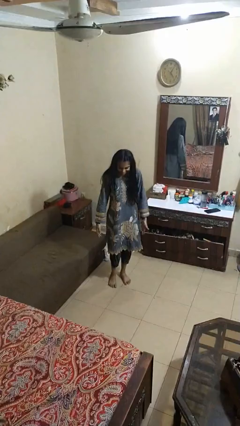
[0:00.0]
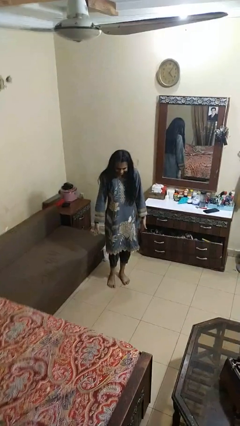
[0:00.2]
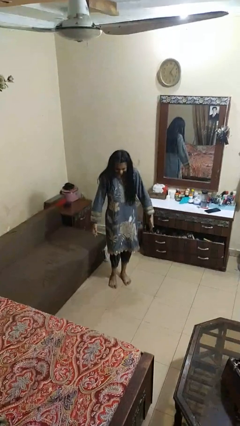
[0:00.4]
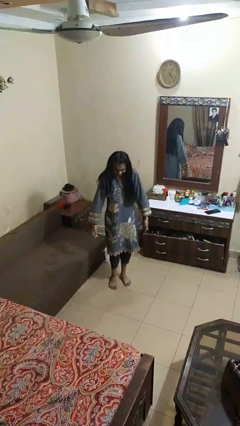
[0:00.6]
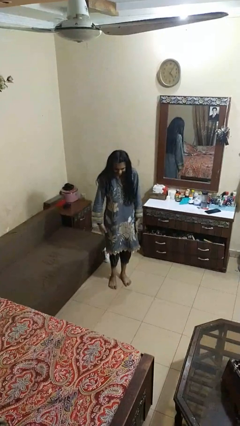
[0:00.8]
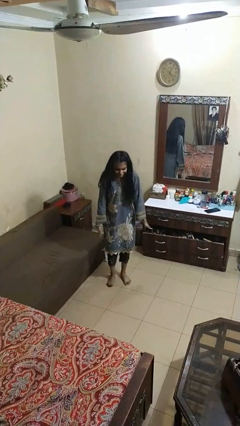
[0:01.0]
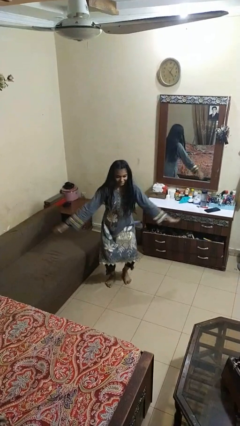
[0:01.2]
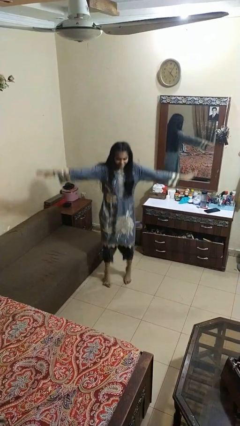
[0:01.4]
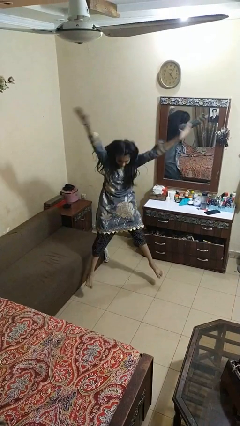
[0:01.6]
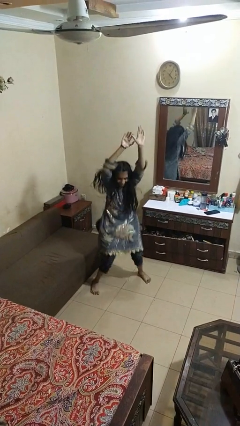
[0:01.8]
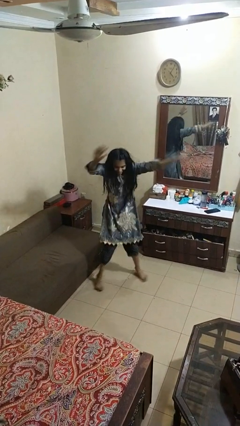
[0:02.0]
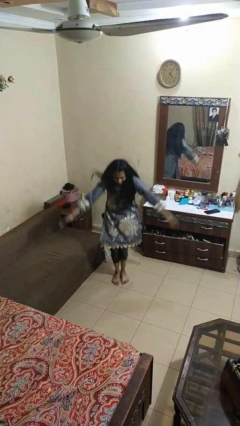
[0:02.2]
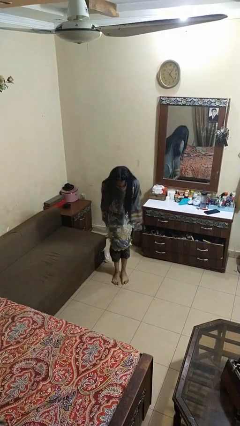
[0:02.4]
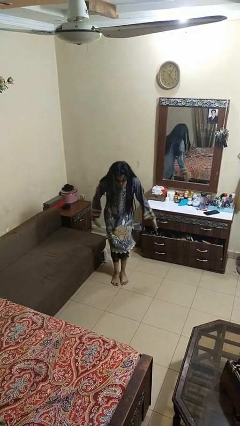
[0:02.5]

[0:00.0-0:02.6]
person exercises with jumping jacks

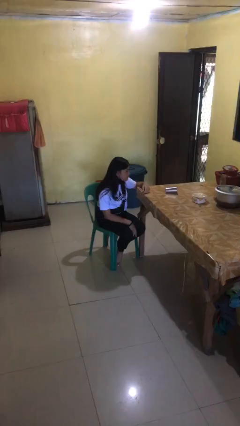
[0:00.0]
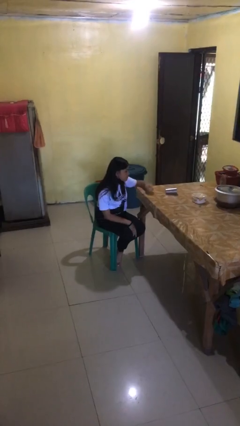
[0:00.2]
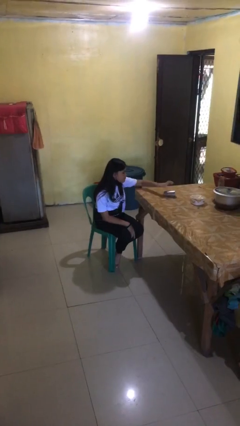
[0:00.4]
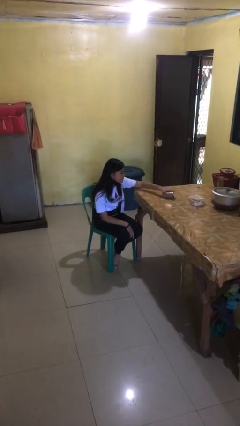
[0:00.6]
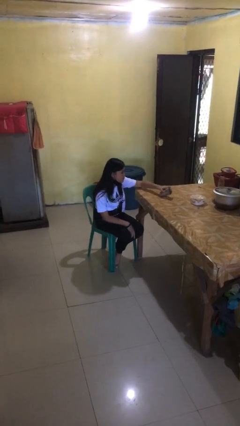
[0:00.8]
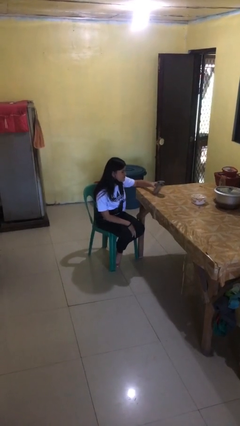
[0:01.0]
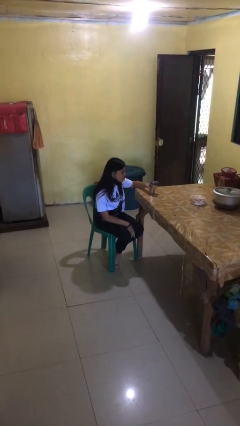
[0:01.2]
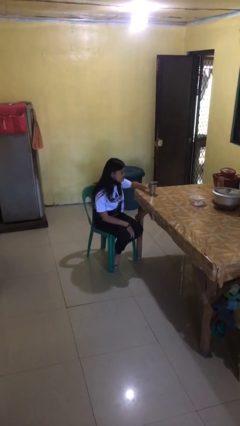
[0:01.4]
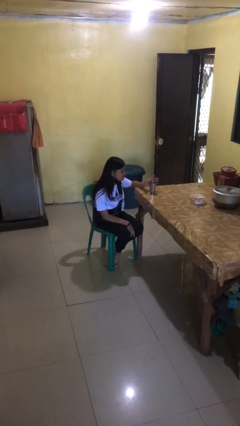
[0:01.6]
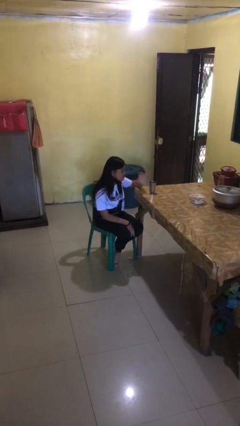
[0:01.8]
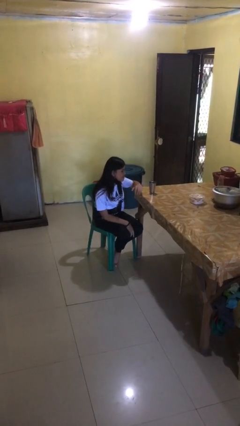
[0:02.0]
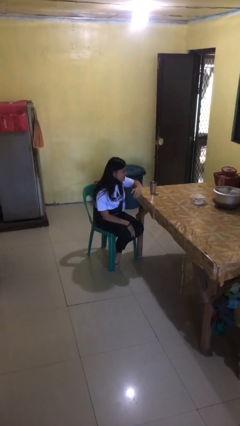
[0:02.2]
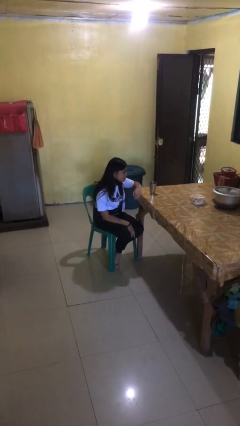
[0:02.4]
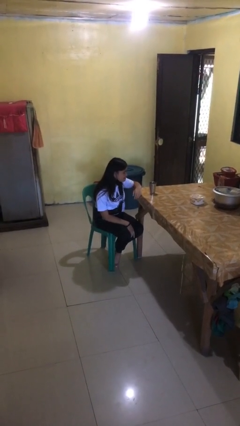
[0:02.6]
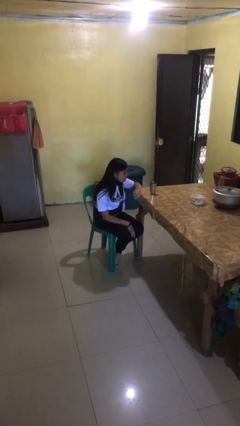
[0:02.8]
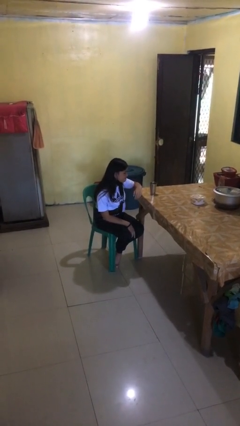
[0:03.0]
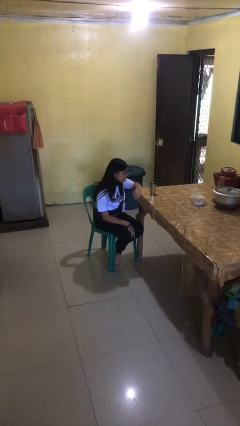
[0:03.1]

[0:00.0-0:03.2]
person sets upright glass

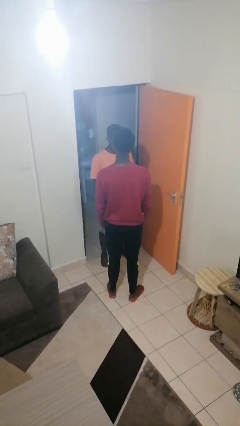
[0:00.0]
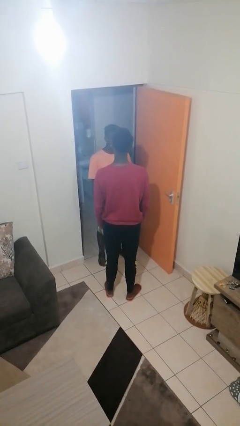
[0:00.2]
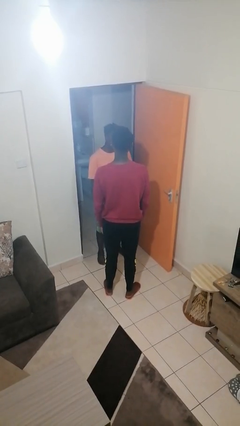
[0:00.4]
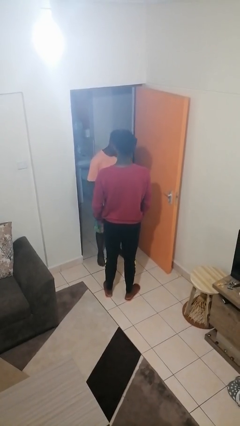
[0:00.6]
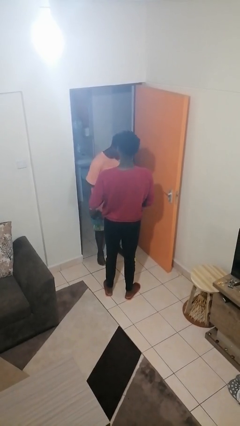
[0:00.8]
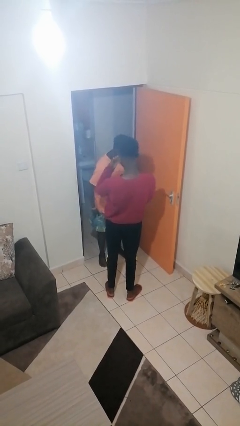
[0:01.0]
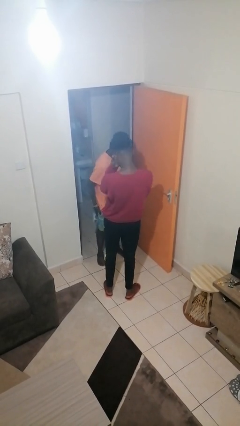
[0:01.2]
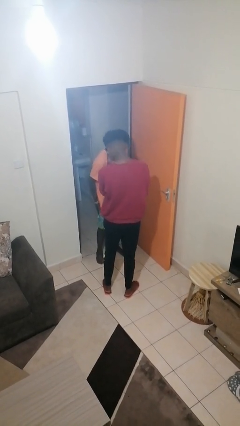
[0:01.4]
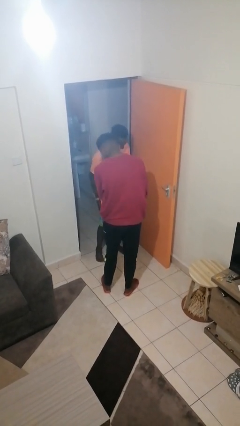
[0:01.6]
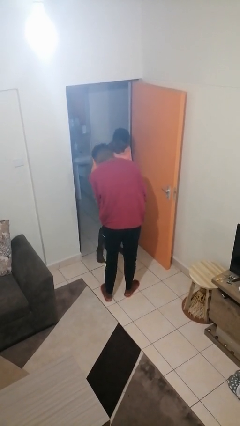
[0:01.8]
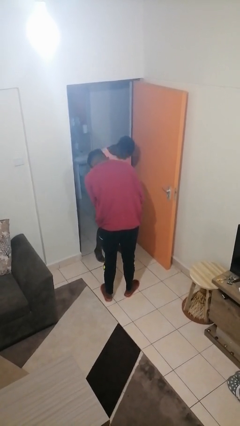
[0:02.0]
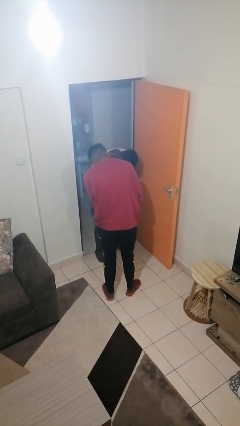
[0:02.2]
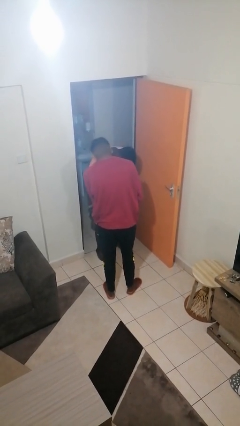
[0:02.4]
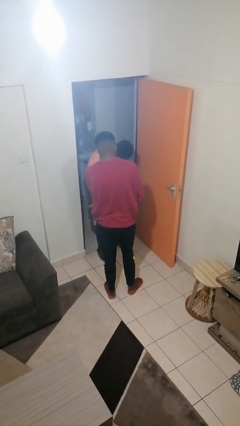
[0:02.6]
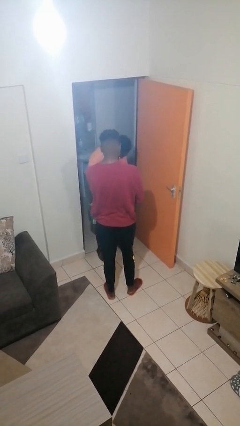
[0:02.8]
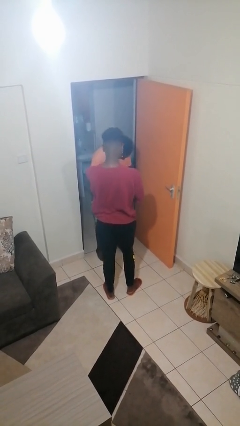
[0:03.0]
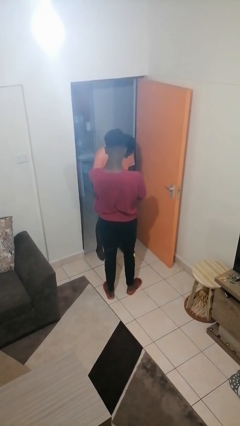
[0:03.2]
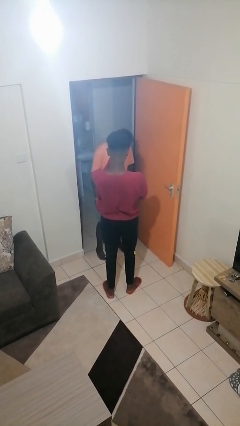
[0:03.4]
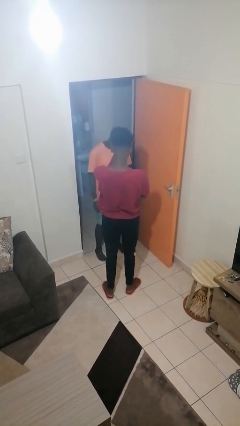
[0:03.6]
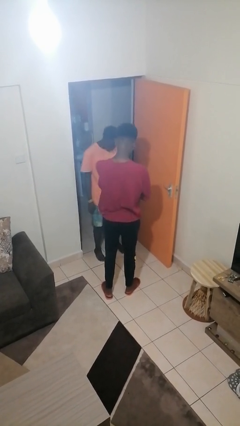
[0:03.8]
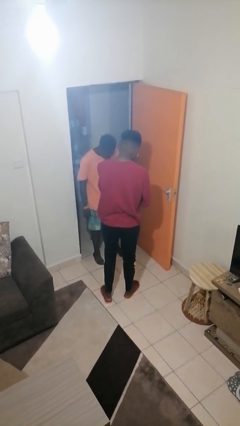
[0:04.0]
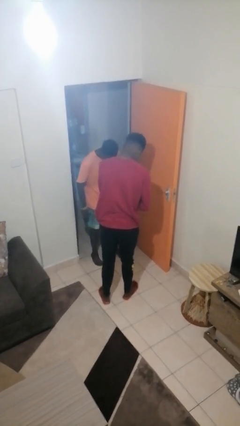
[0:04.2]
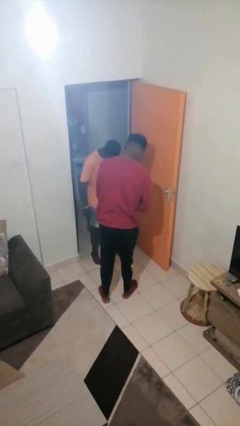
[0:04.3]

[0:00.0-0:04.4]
person laughs with person

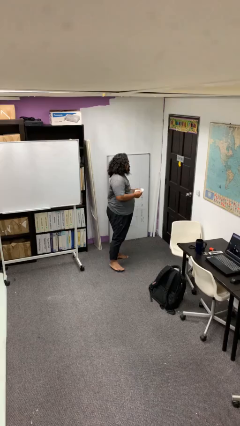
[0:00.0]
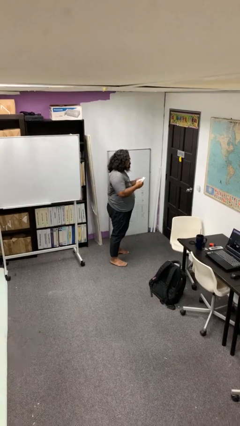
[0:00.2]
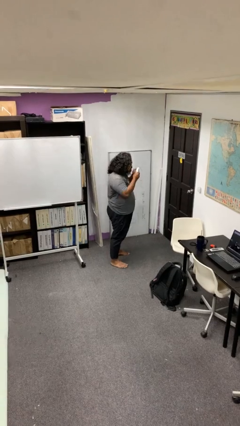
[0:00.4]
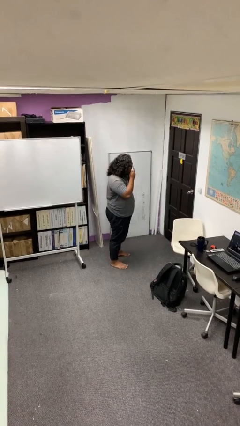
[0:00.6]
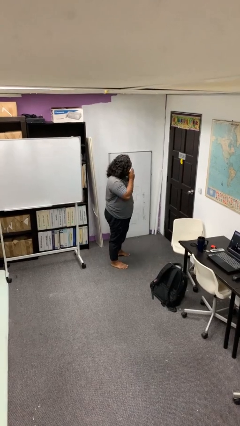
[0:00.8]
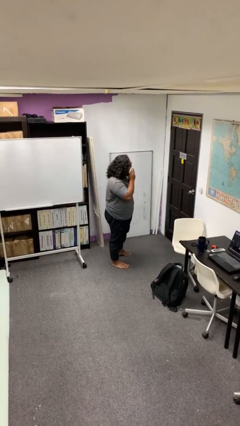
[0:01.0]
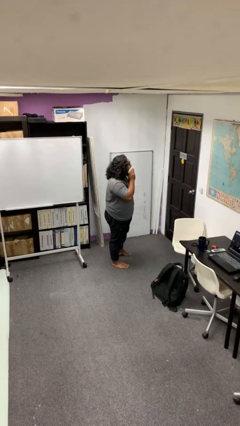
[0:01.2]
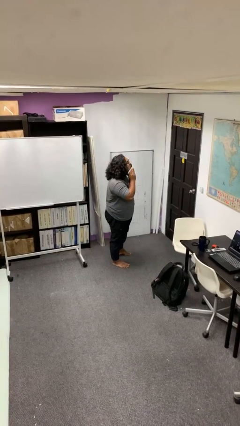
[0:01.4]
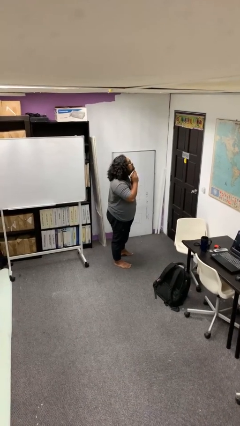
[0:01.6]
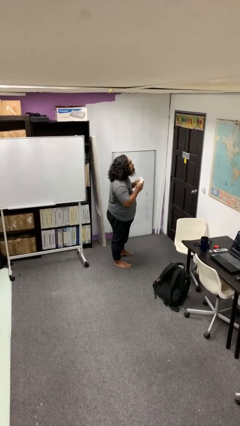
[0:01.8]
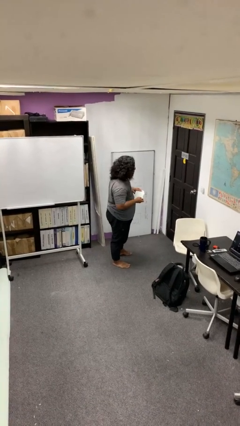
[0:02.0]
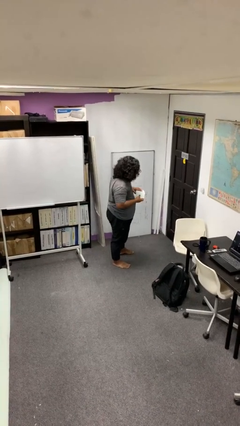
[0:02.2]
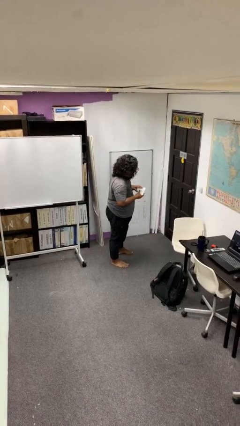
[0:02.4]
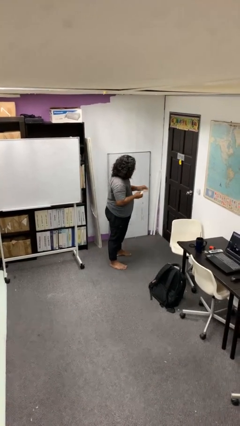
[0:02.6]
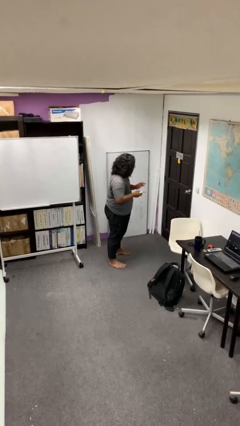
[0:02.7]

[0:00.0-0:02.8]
person wipes mouth with napkin

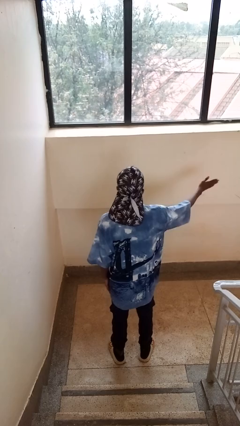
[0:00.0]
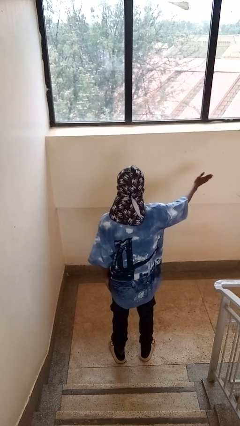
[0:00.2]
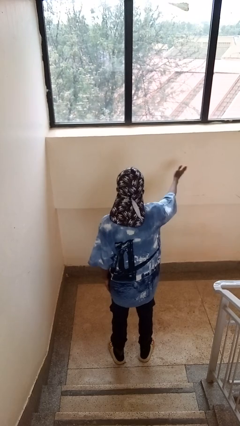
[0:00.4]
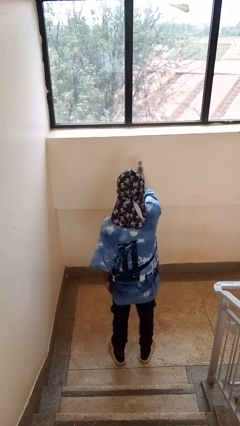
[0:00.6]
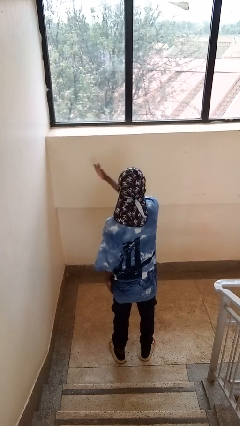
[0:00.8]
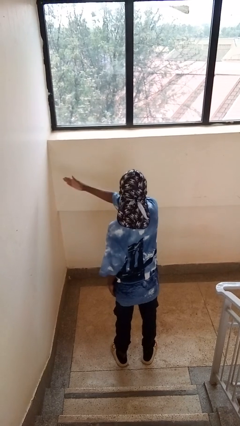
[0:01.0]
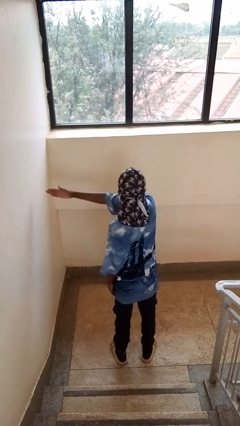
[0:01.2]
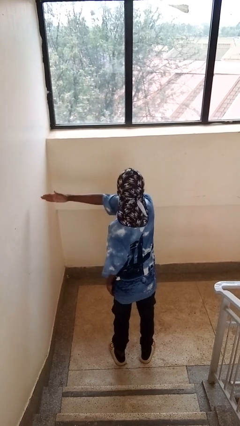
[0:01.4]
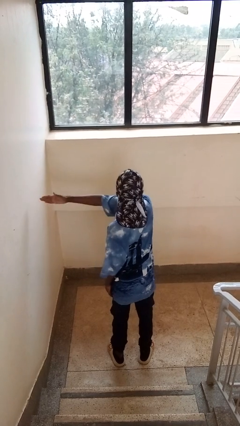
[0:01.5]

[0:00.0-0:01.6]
person gestures swipe left

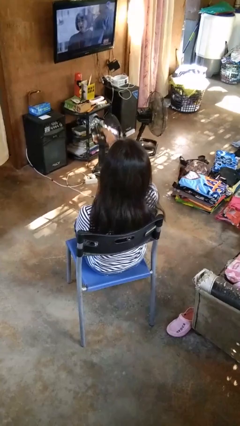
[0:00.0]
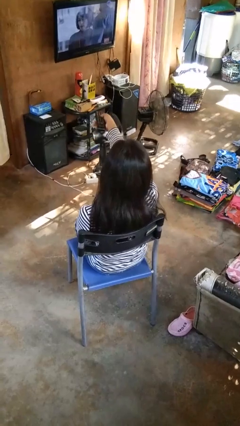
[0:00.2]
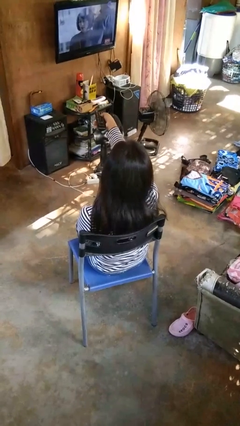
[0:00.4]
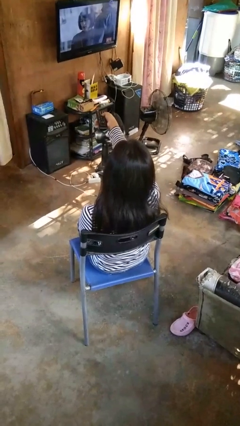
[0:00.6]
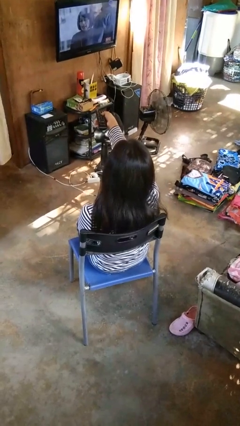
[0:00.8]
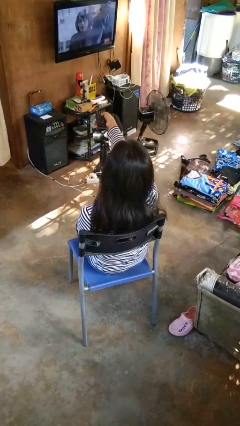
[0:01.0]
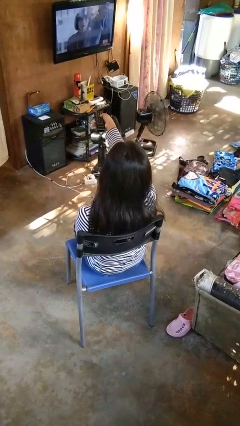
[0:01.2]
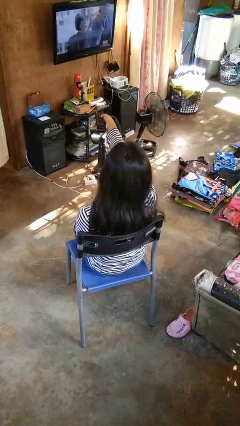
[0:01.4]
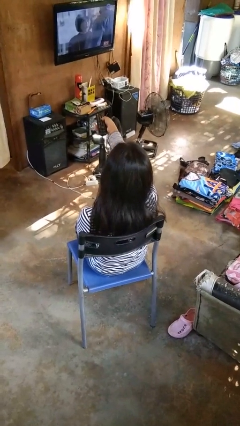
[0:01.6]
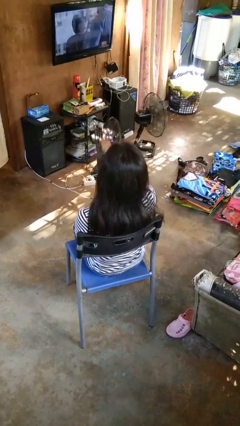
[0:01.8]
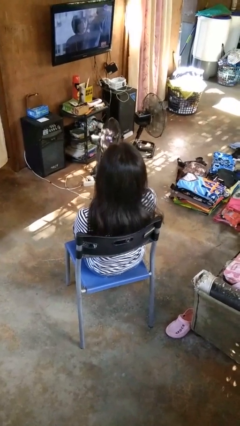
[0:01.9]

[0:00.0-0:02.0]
person uses television remote

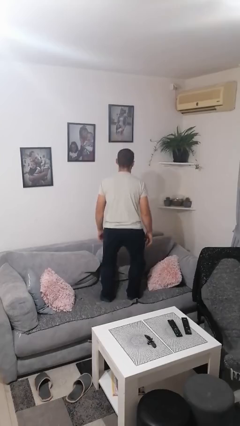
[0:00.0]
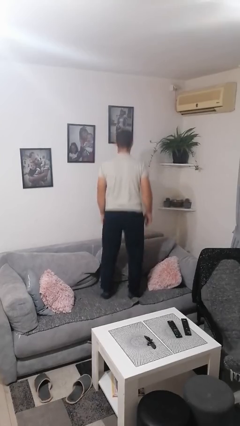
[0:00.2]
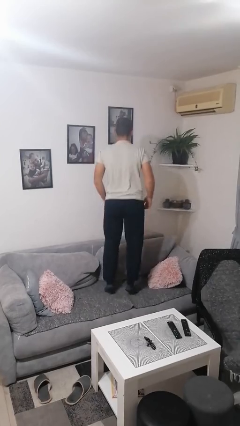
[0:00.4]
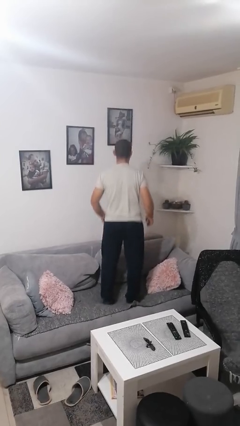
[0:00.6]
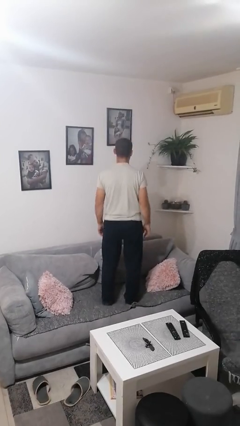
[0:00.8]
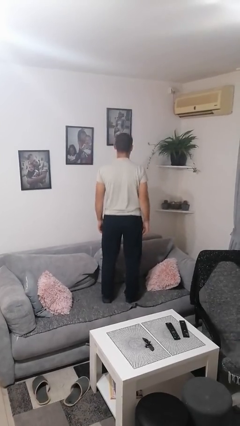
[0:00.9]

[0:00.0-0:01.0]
person jumps on couch
